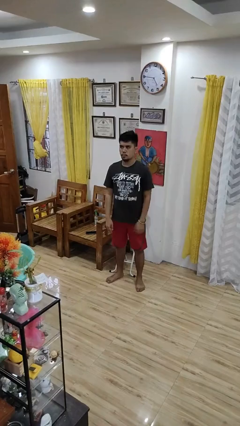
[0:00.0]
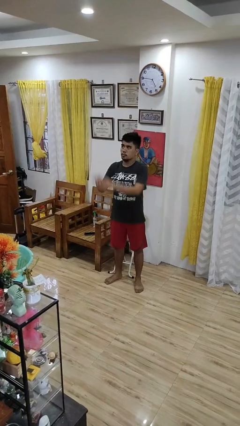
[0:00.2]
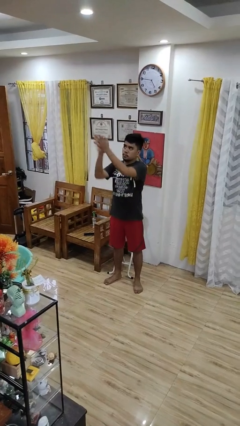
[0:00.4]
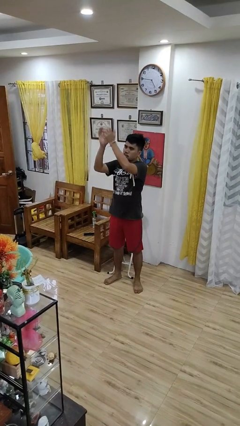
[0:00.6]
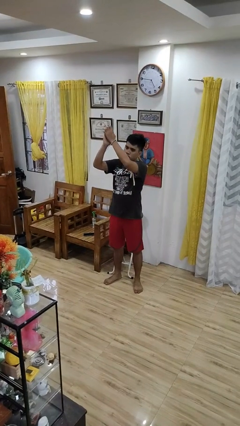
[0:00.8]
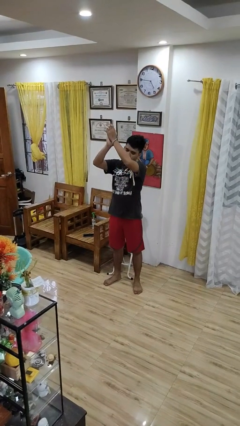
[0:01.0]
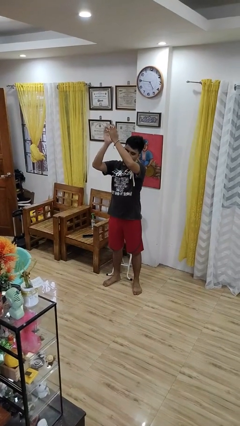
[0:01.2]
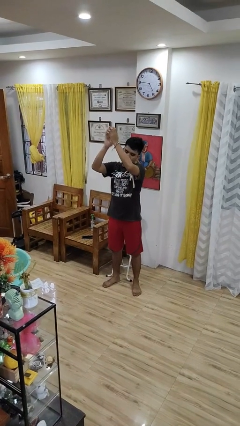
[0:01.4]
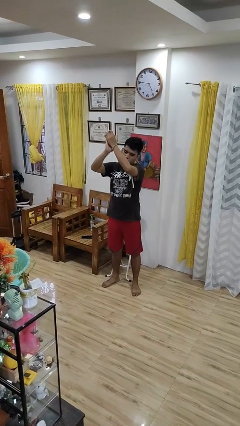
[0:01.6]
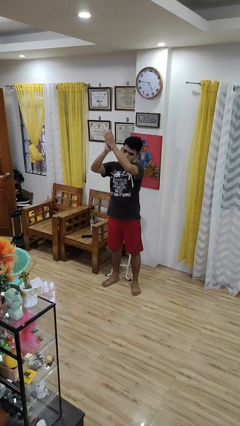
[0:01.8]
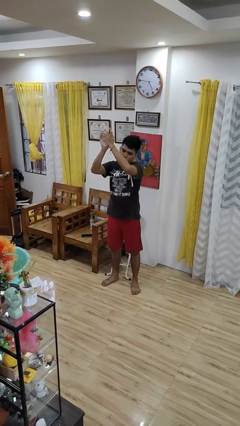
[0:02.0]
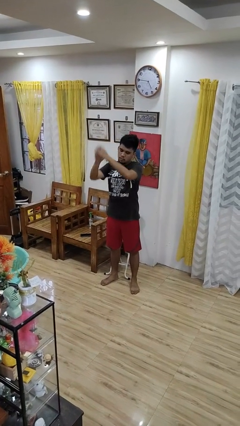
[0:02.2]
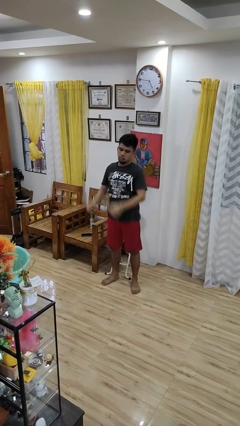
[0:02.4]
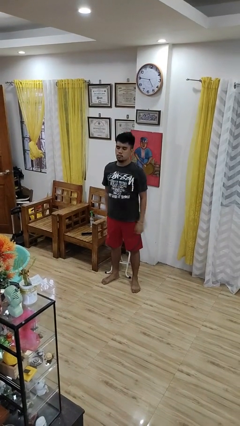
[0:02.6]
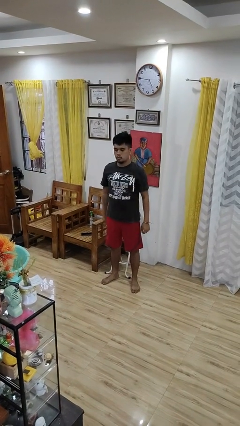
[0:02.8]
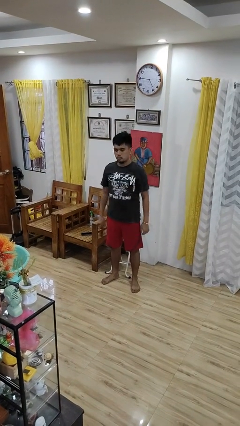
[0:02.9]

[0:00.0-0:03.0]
person claps hands

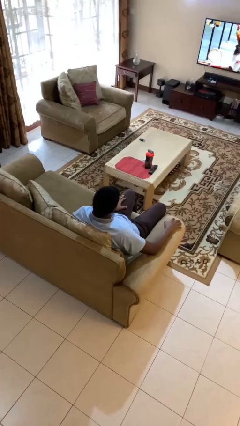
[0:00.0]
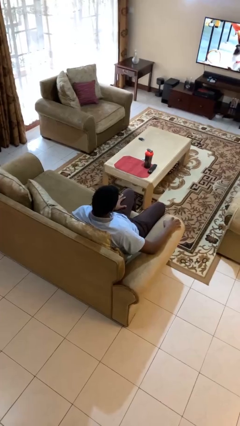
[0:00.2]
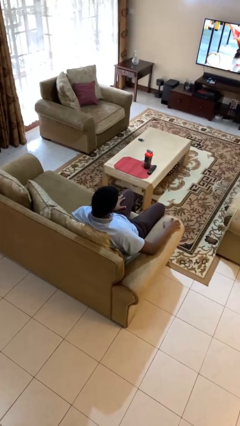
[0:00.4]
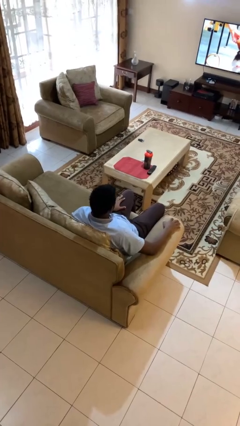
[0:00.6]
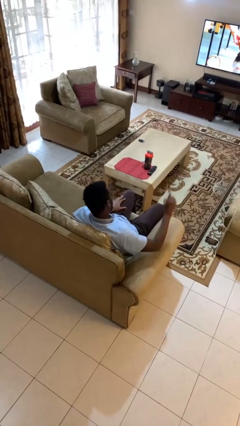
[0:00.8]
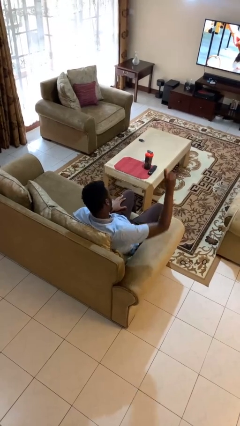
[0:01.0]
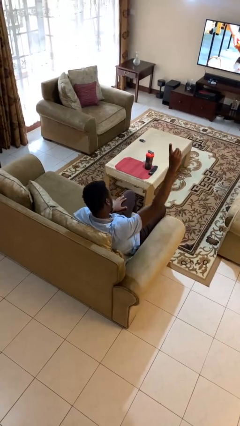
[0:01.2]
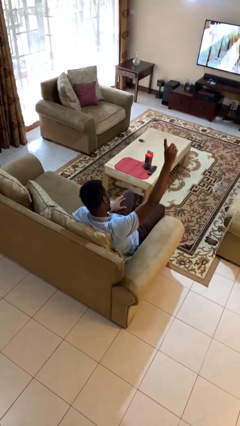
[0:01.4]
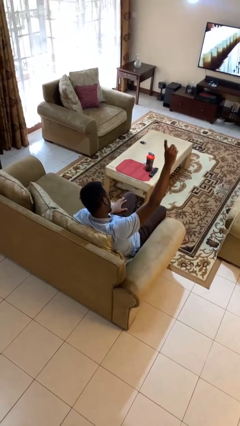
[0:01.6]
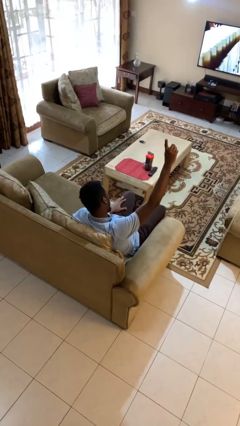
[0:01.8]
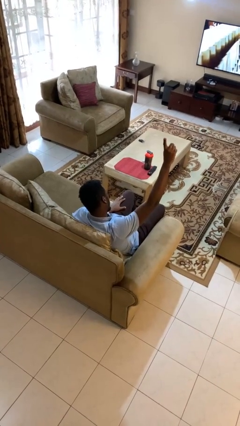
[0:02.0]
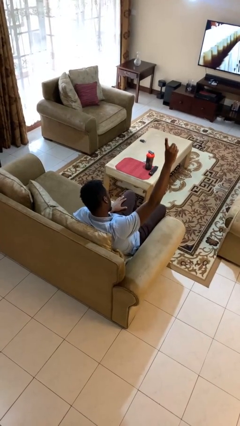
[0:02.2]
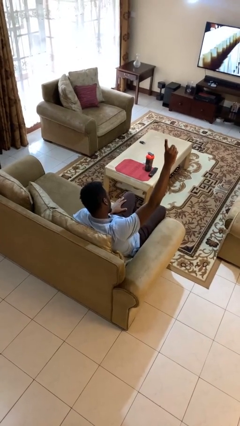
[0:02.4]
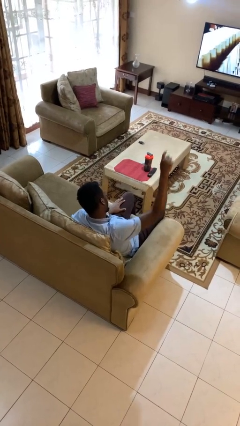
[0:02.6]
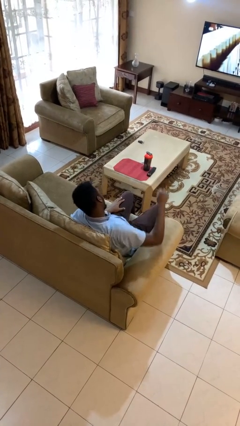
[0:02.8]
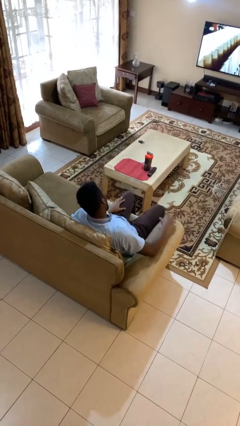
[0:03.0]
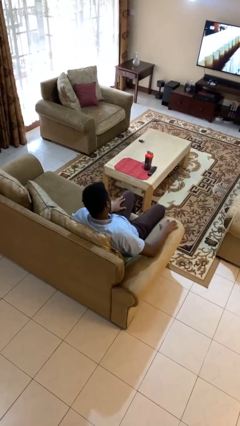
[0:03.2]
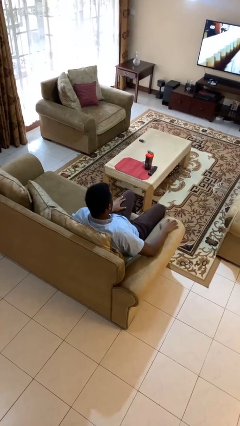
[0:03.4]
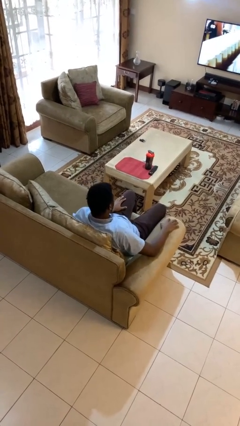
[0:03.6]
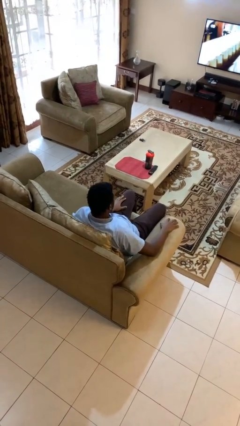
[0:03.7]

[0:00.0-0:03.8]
person gestures number one

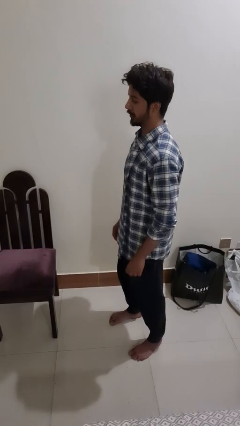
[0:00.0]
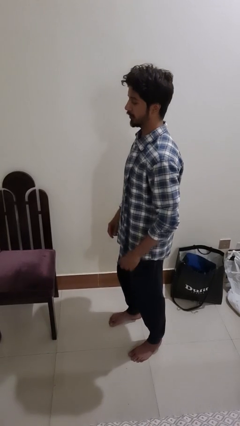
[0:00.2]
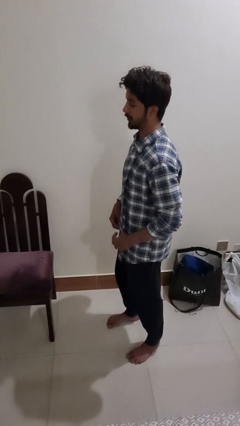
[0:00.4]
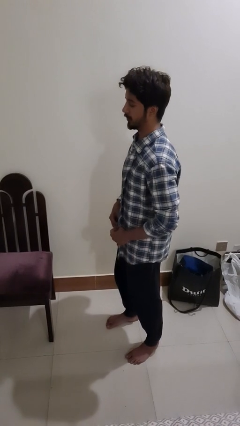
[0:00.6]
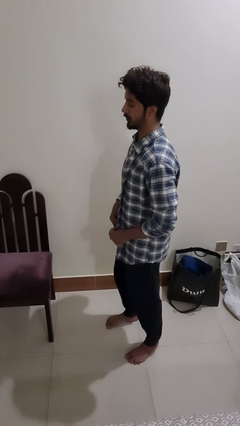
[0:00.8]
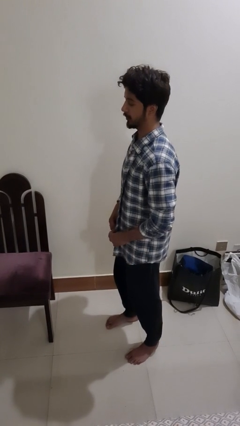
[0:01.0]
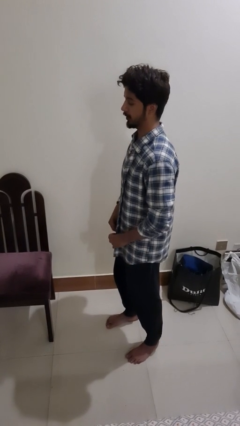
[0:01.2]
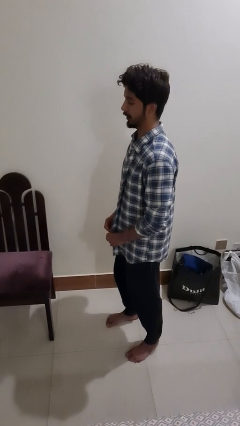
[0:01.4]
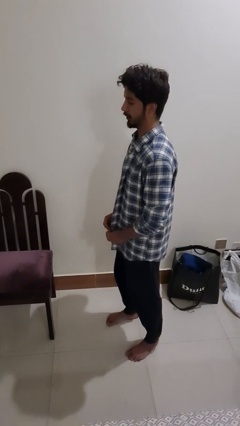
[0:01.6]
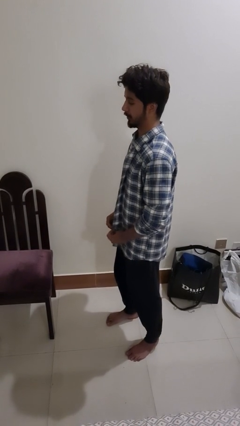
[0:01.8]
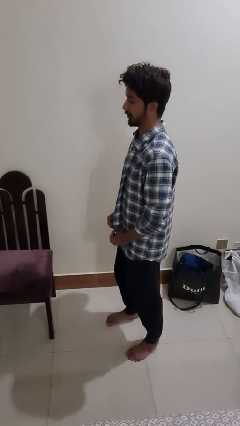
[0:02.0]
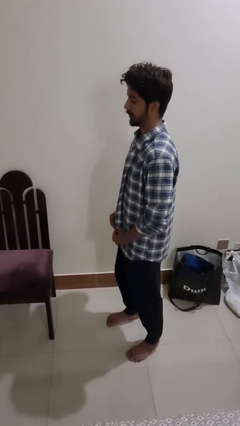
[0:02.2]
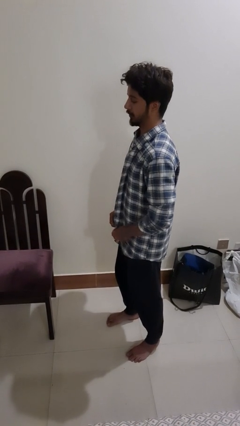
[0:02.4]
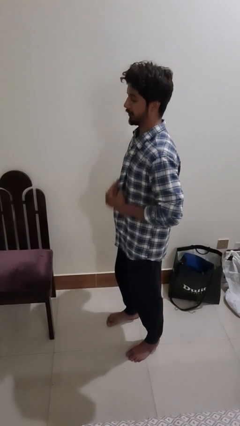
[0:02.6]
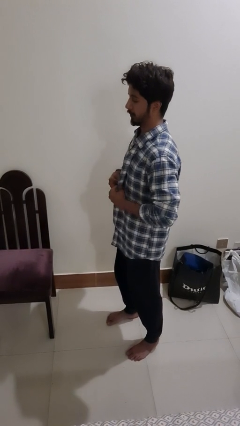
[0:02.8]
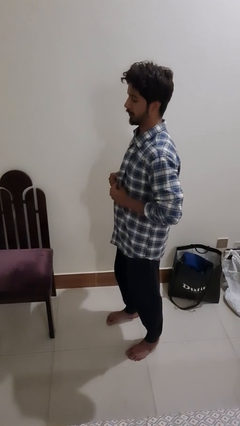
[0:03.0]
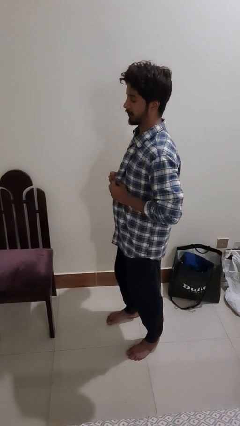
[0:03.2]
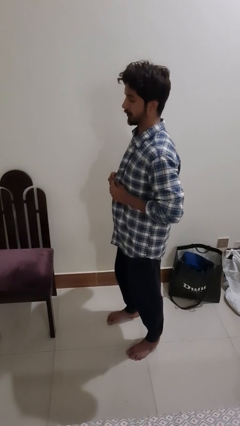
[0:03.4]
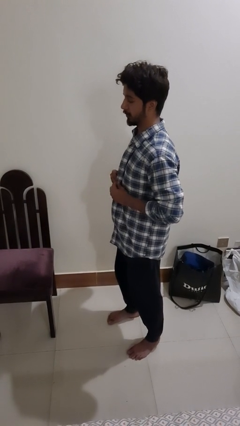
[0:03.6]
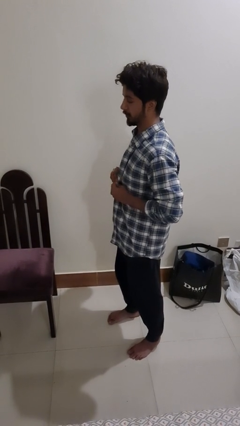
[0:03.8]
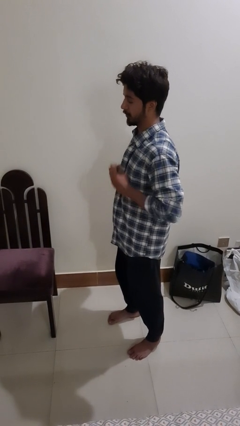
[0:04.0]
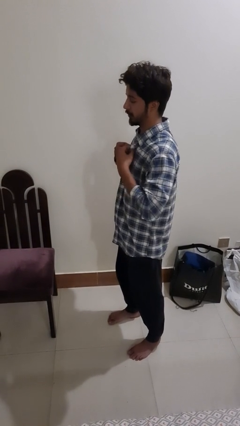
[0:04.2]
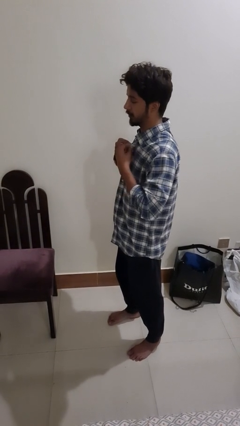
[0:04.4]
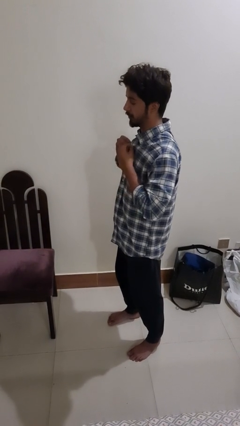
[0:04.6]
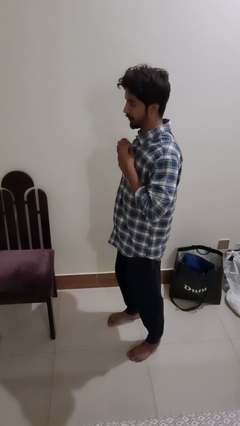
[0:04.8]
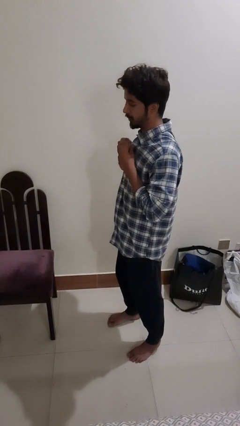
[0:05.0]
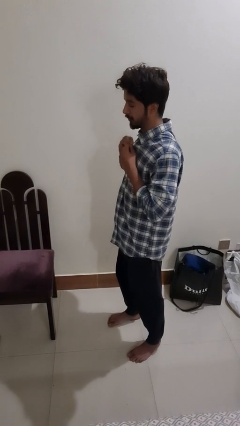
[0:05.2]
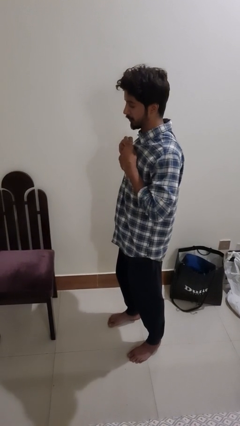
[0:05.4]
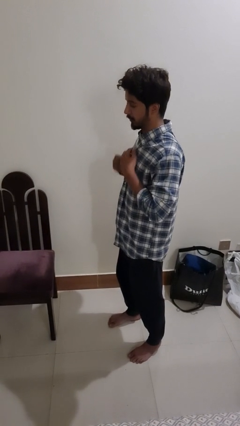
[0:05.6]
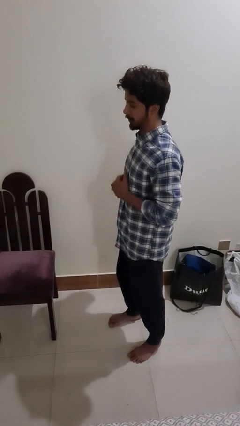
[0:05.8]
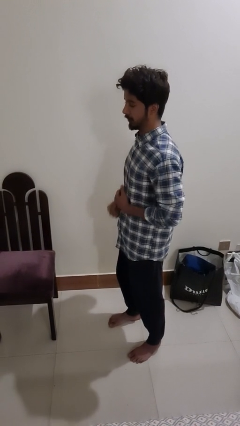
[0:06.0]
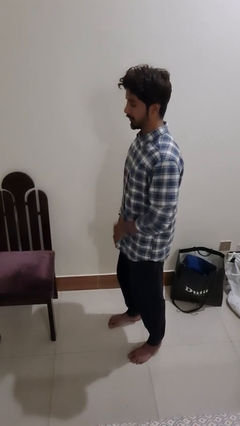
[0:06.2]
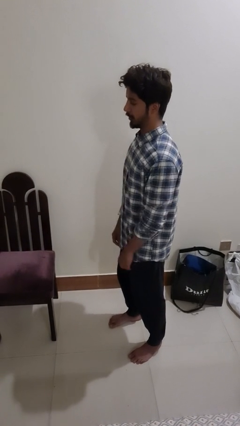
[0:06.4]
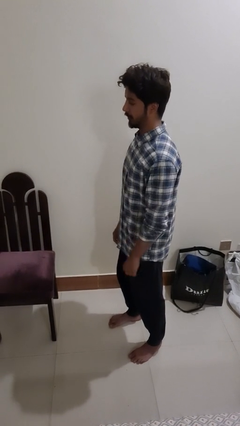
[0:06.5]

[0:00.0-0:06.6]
person buttons shirt

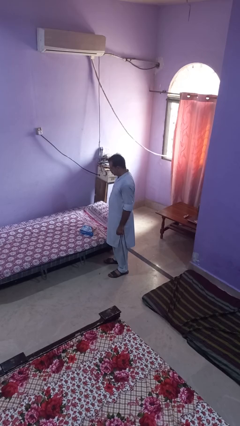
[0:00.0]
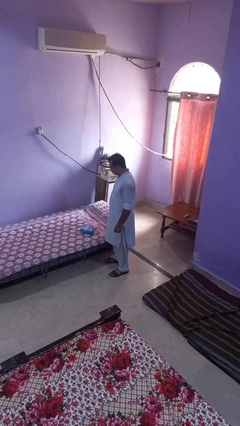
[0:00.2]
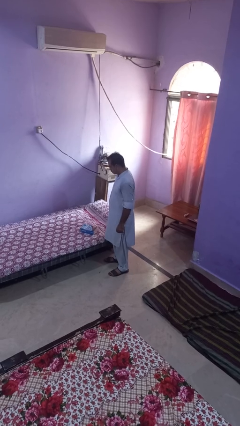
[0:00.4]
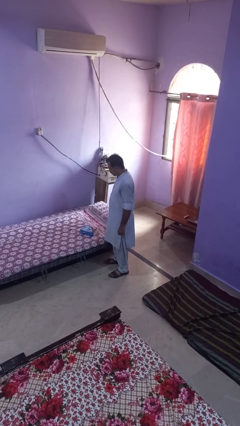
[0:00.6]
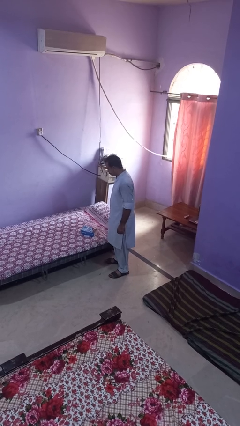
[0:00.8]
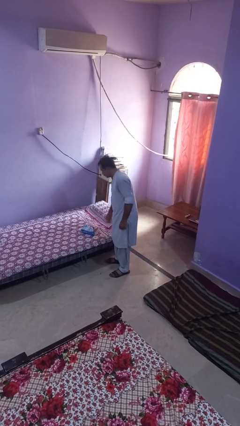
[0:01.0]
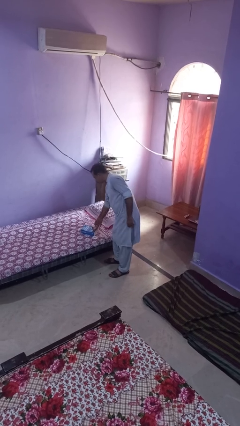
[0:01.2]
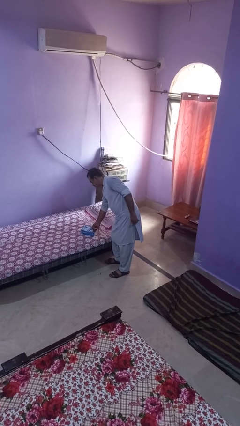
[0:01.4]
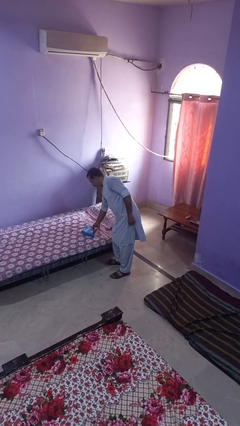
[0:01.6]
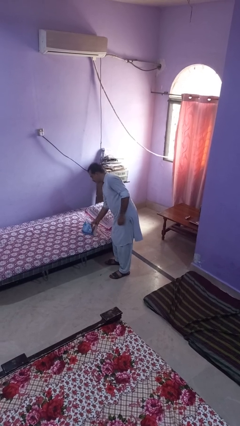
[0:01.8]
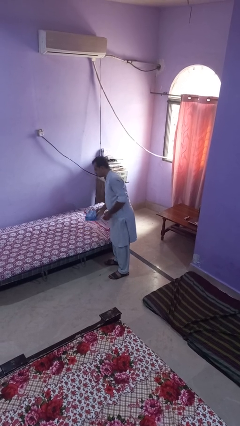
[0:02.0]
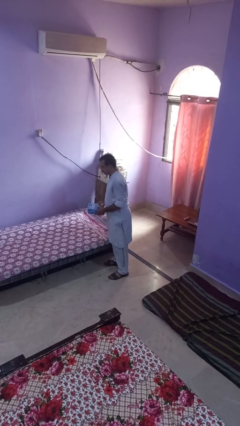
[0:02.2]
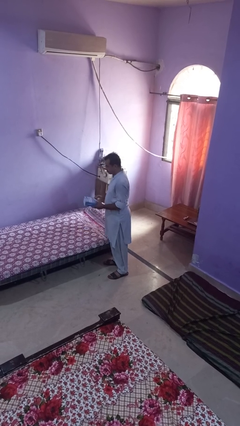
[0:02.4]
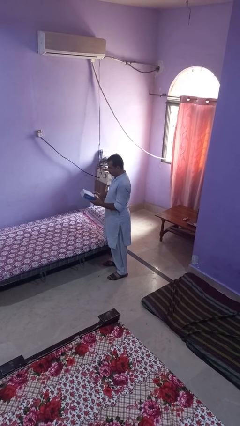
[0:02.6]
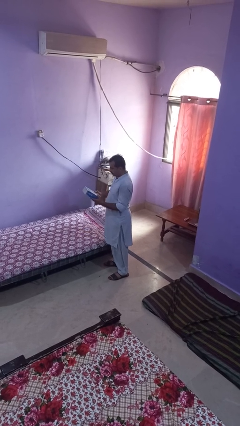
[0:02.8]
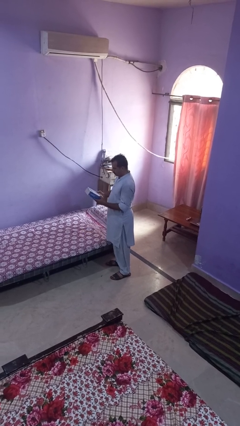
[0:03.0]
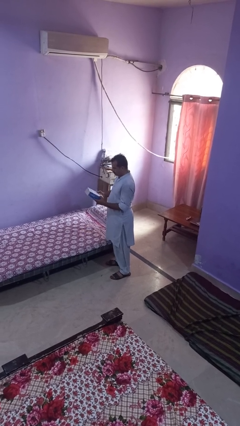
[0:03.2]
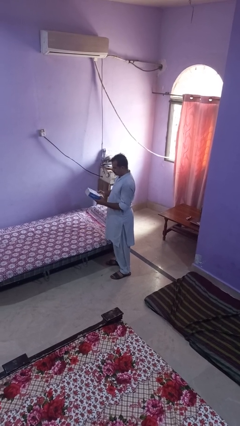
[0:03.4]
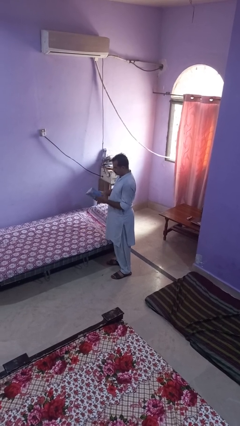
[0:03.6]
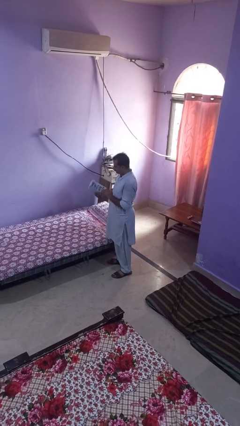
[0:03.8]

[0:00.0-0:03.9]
person picks up object from bed

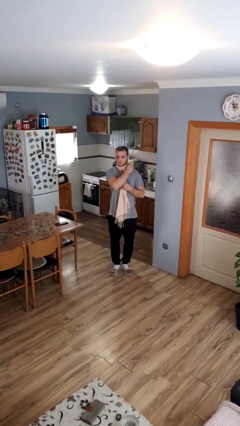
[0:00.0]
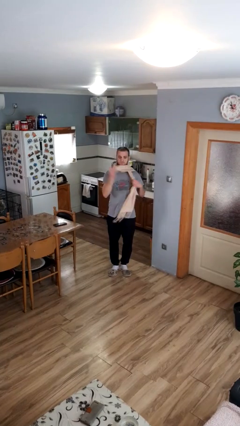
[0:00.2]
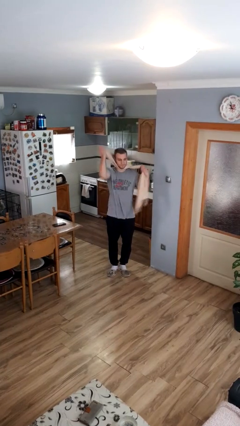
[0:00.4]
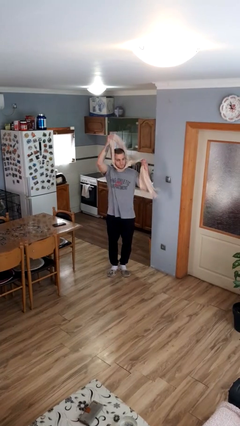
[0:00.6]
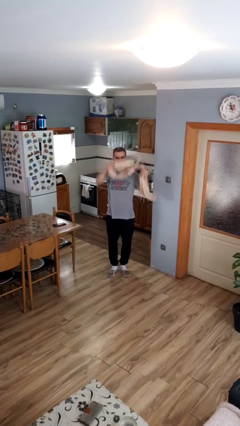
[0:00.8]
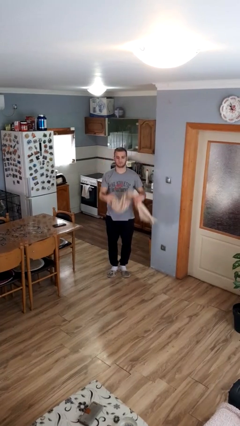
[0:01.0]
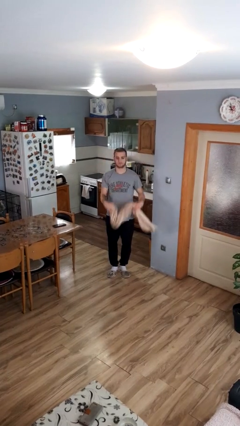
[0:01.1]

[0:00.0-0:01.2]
person takes off scarf
